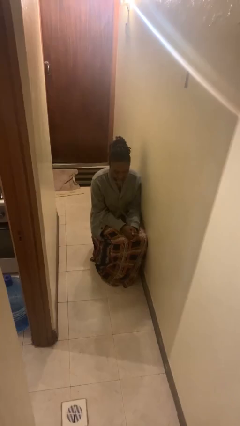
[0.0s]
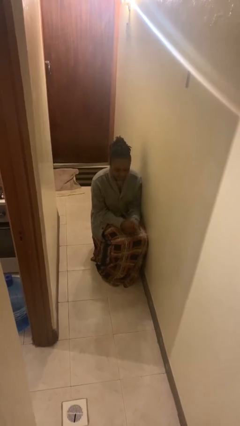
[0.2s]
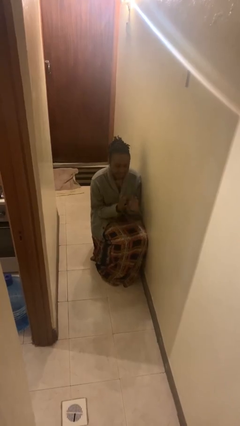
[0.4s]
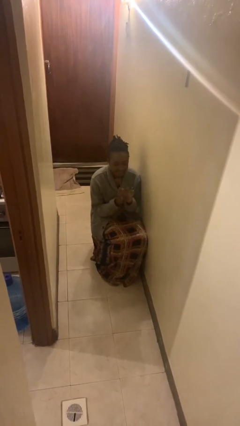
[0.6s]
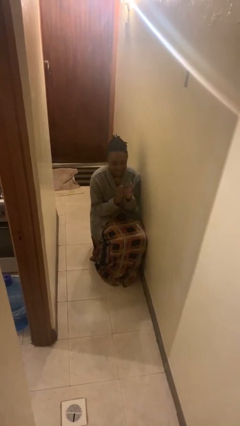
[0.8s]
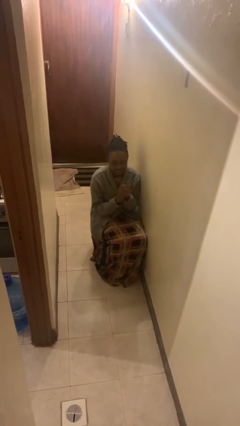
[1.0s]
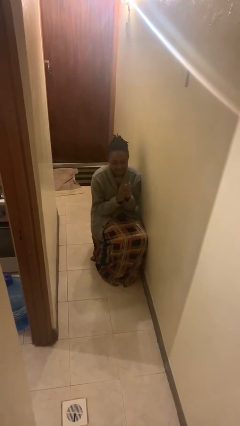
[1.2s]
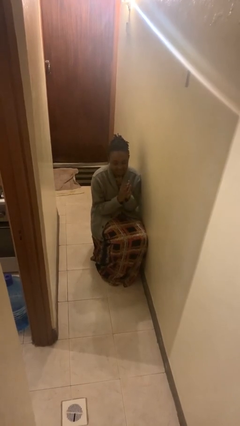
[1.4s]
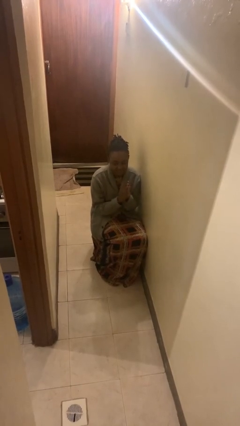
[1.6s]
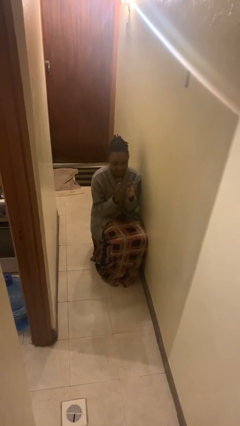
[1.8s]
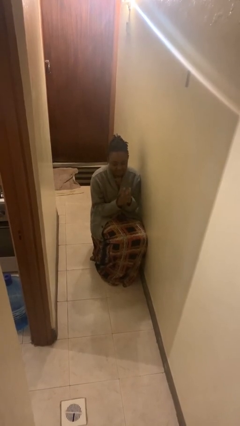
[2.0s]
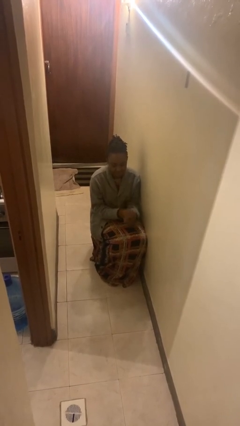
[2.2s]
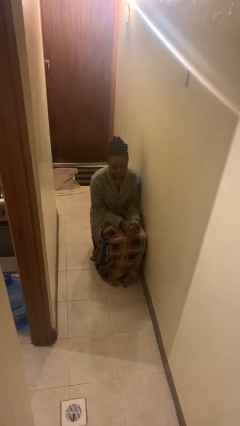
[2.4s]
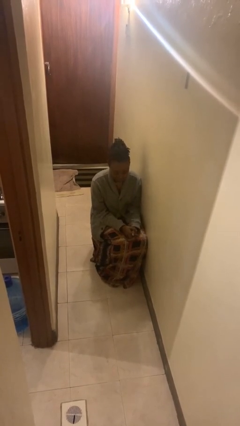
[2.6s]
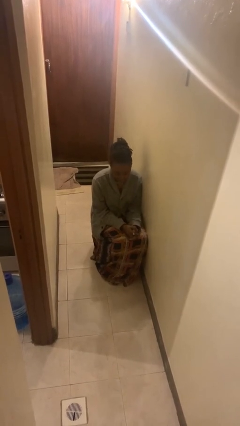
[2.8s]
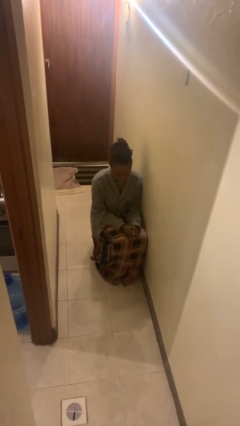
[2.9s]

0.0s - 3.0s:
person claps hands

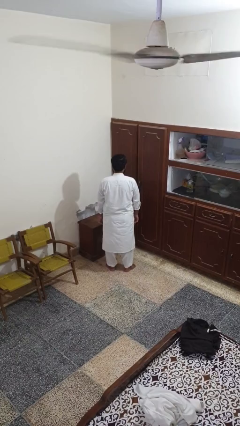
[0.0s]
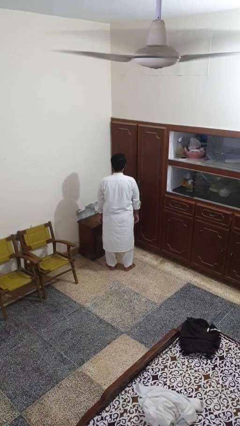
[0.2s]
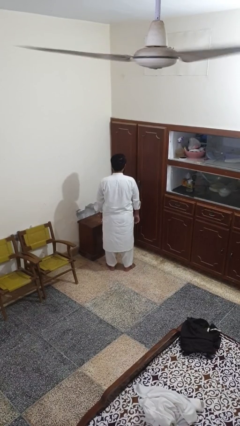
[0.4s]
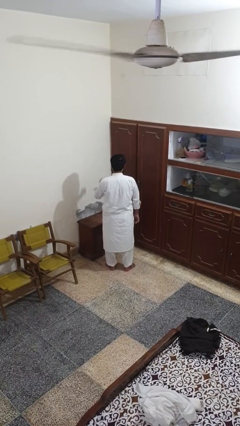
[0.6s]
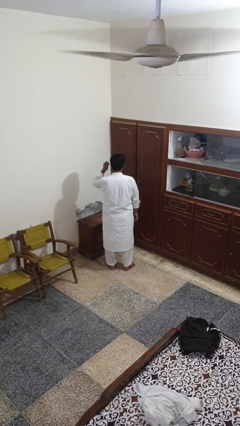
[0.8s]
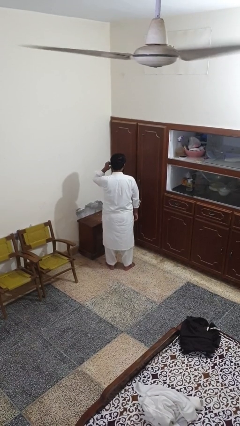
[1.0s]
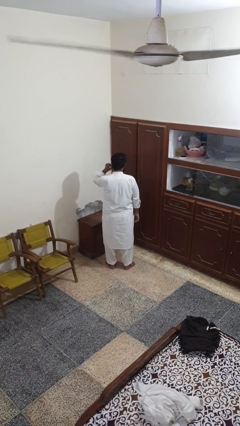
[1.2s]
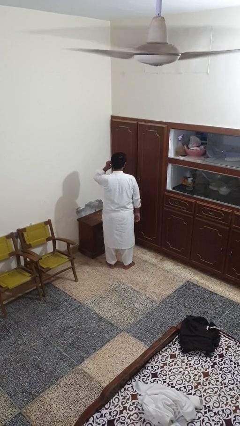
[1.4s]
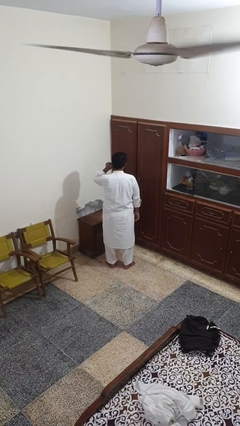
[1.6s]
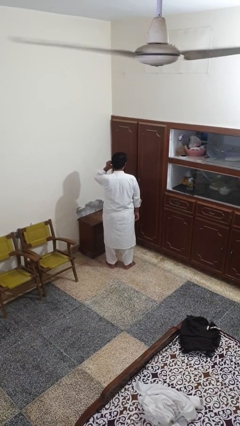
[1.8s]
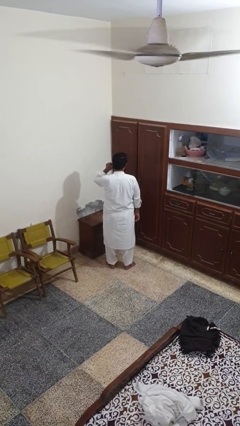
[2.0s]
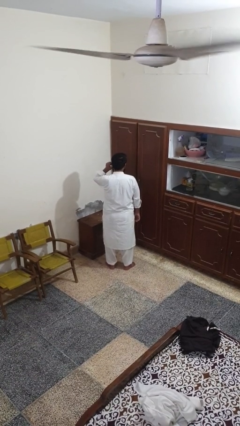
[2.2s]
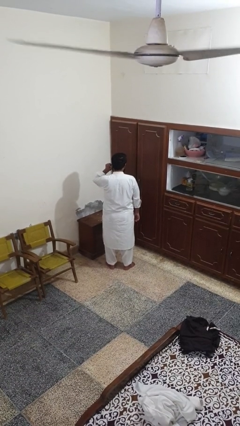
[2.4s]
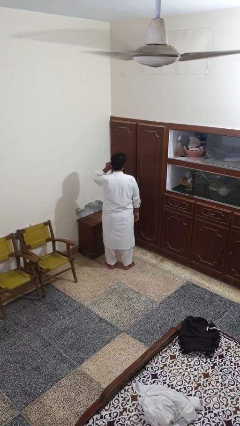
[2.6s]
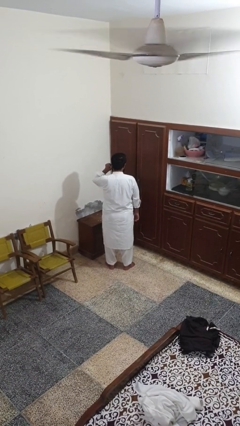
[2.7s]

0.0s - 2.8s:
person touches earlobe

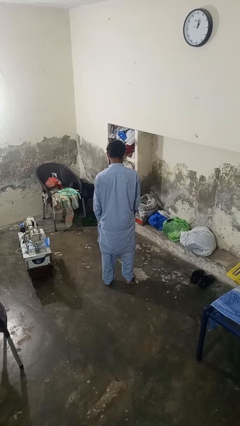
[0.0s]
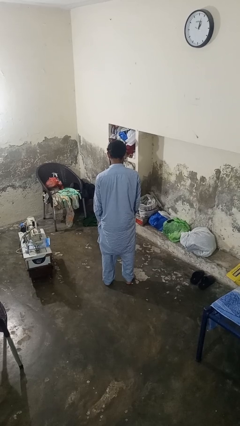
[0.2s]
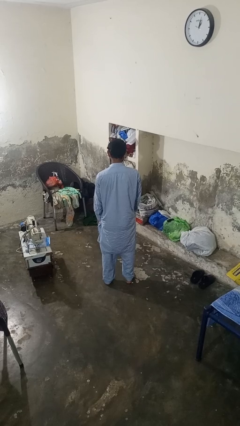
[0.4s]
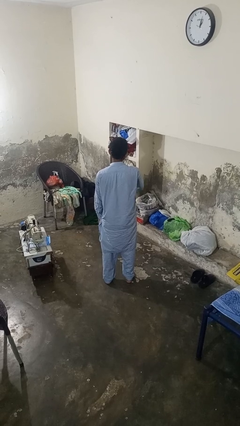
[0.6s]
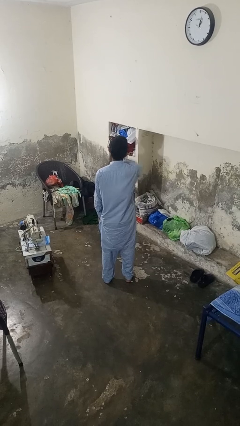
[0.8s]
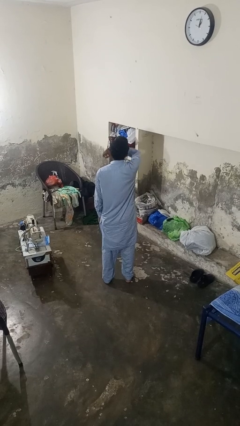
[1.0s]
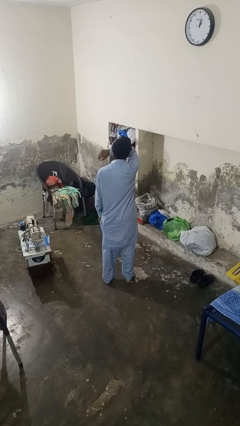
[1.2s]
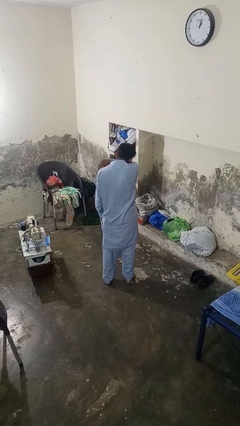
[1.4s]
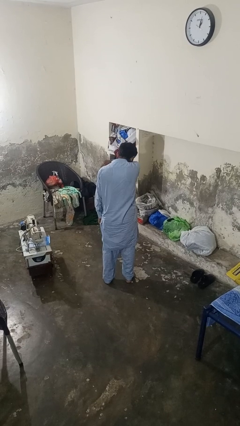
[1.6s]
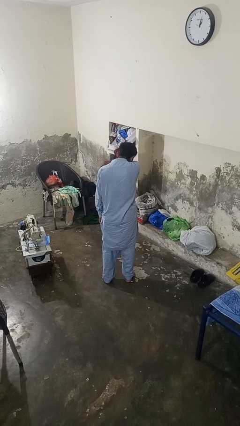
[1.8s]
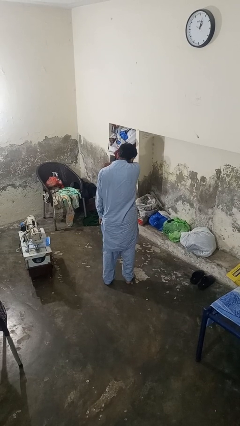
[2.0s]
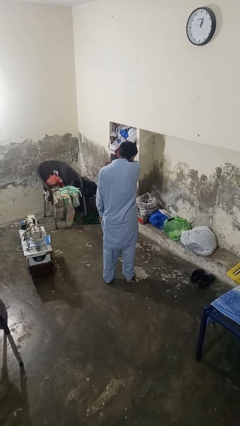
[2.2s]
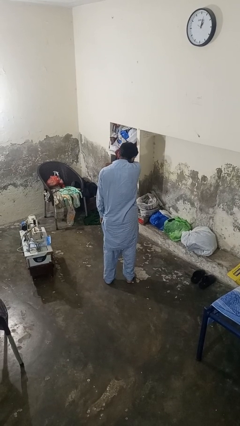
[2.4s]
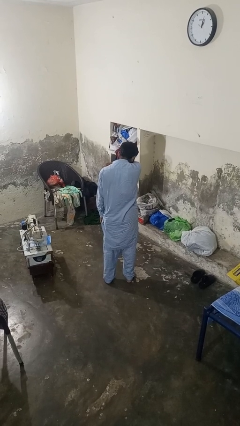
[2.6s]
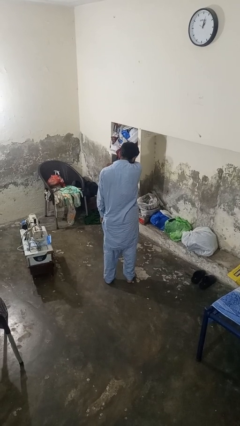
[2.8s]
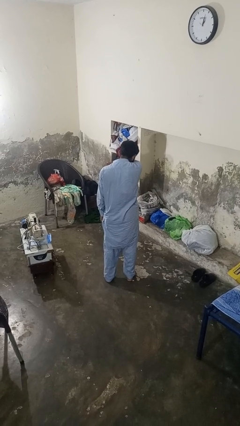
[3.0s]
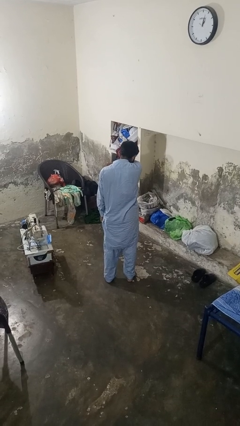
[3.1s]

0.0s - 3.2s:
person sneezes into arm

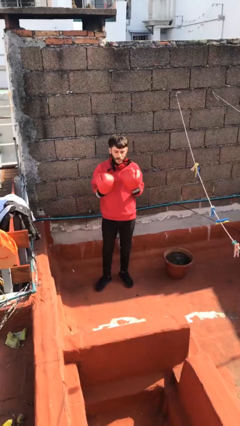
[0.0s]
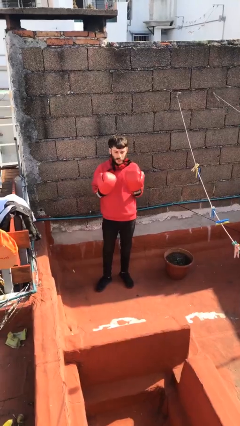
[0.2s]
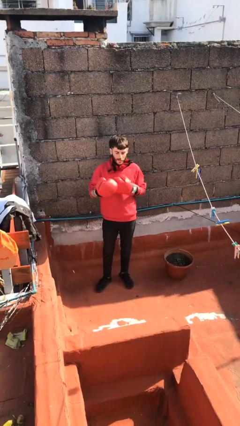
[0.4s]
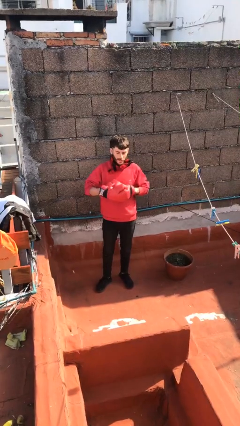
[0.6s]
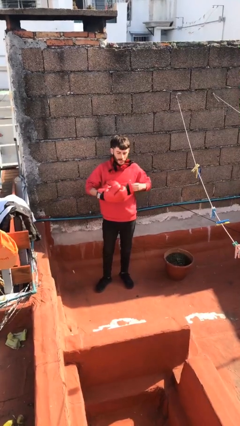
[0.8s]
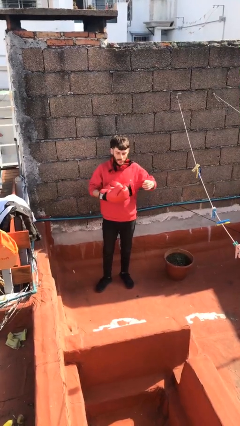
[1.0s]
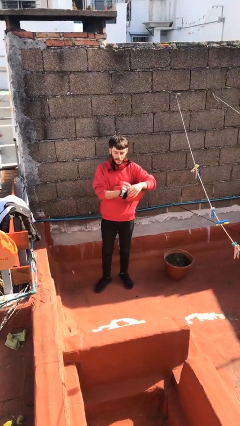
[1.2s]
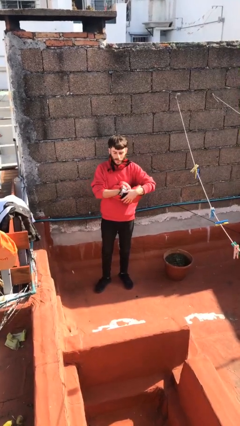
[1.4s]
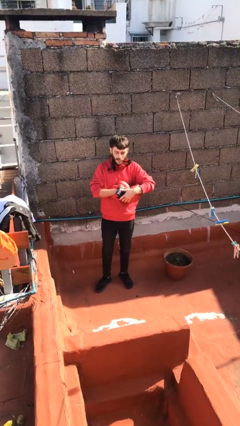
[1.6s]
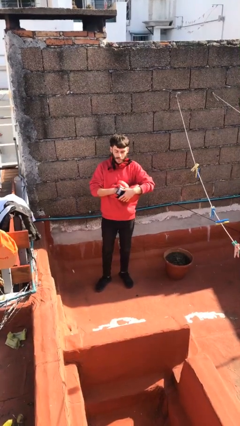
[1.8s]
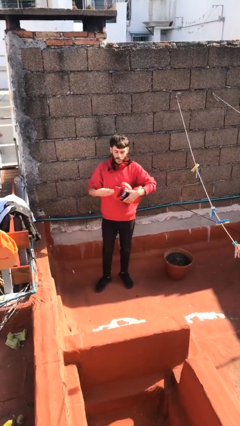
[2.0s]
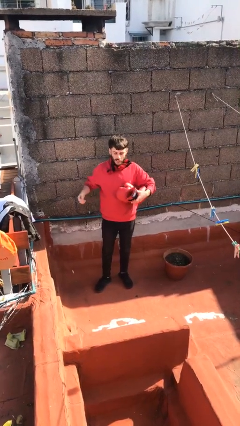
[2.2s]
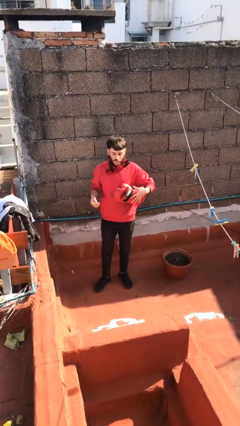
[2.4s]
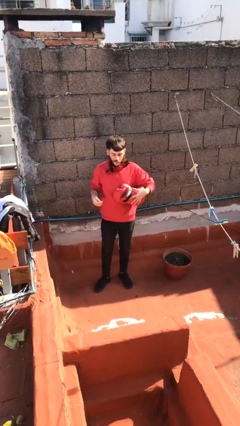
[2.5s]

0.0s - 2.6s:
person takes off gloves

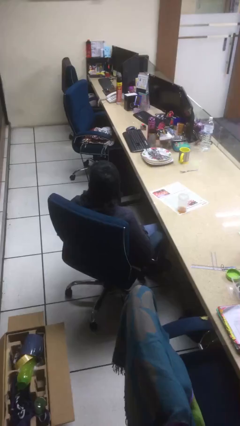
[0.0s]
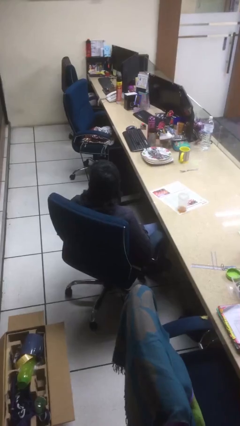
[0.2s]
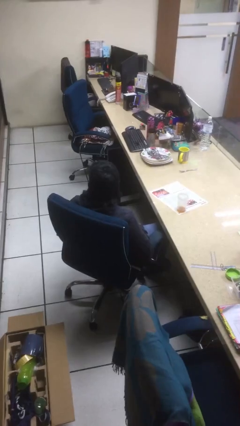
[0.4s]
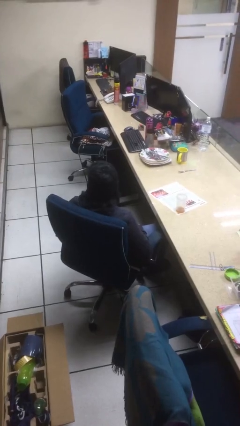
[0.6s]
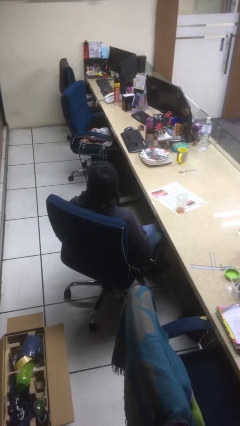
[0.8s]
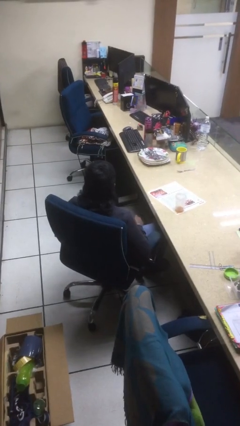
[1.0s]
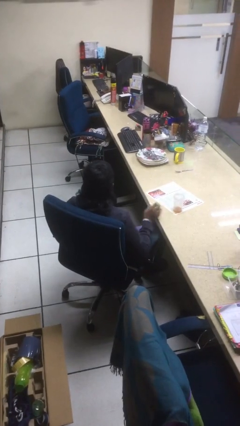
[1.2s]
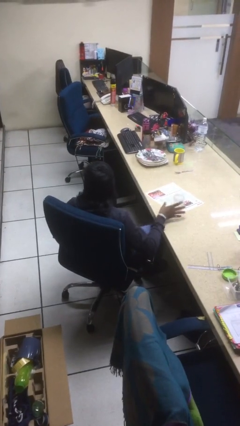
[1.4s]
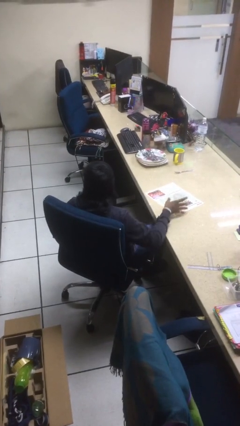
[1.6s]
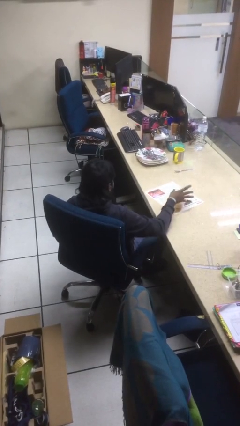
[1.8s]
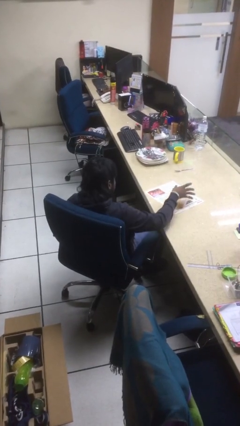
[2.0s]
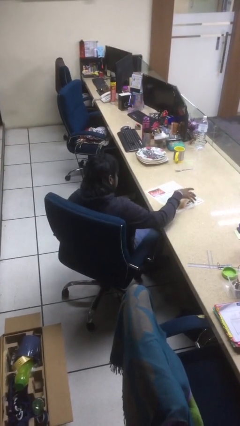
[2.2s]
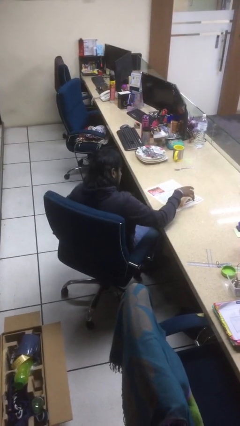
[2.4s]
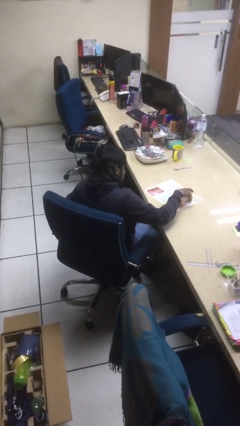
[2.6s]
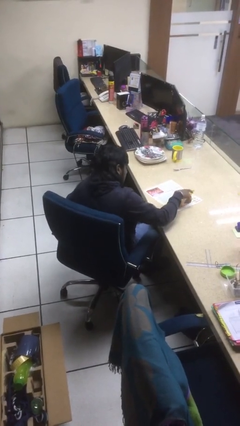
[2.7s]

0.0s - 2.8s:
person spills on table

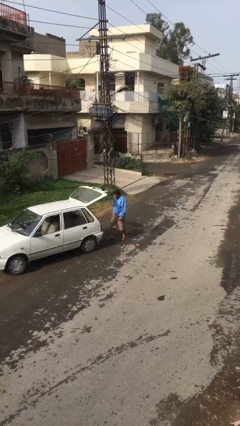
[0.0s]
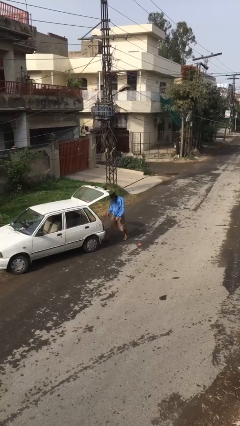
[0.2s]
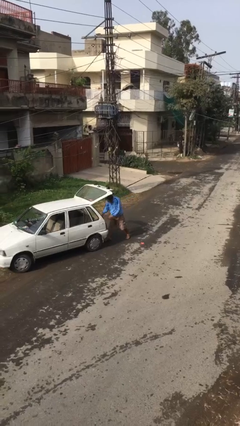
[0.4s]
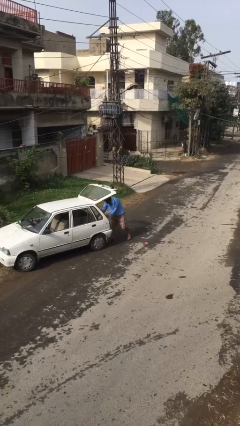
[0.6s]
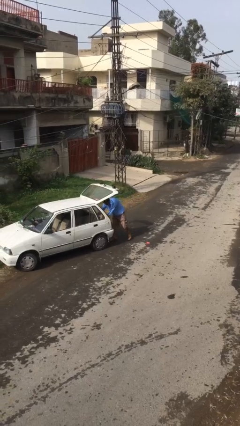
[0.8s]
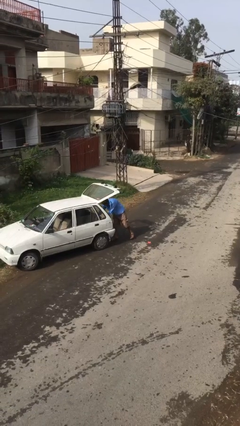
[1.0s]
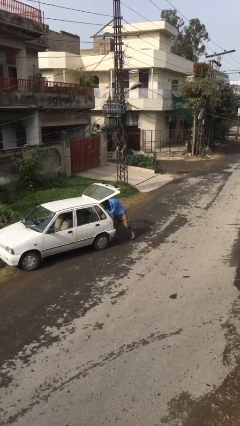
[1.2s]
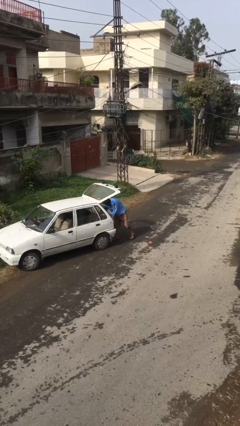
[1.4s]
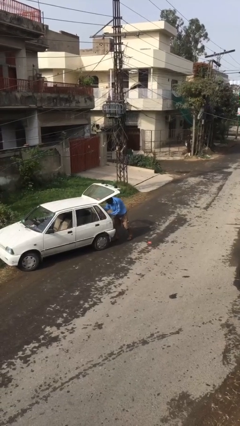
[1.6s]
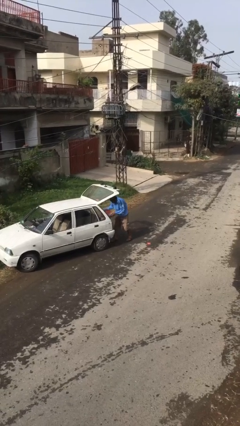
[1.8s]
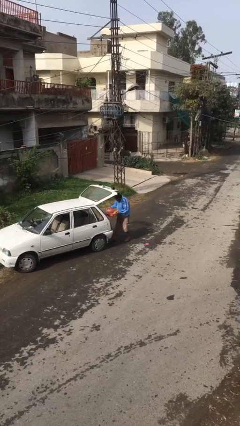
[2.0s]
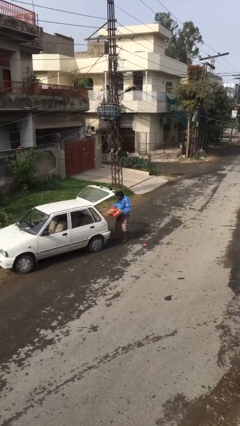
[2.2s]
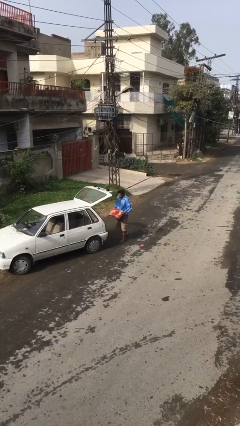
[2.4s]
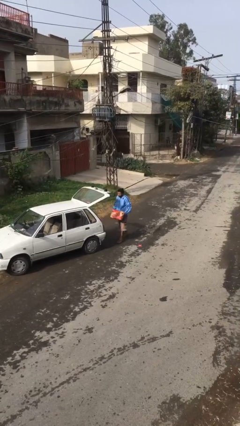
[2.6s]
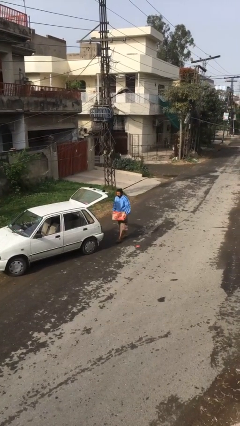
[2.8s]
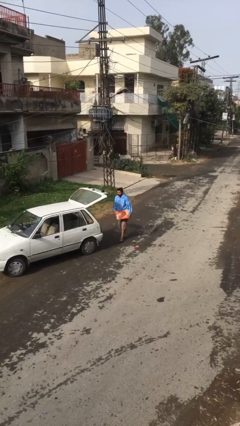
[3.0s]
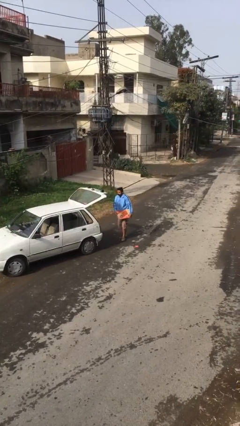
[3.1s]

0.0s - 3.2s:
person unloads car
